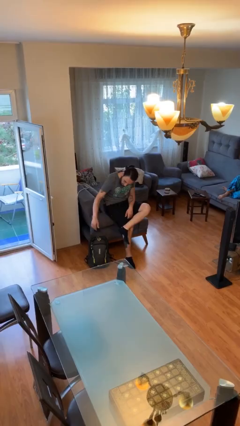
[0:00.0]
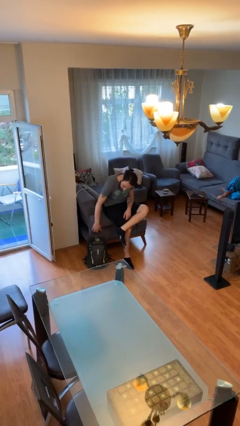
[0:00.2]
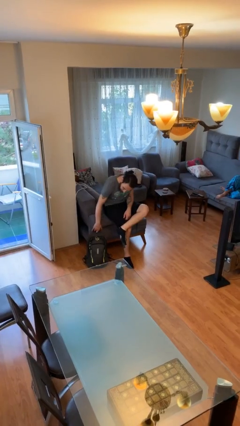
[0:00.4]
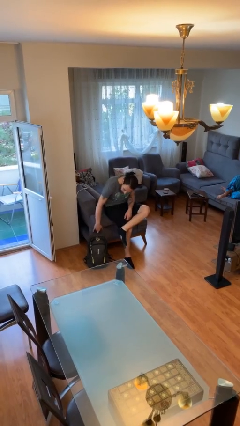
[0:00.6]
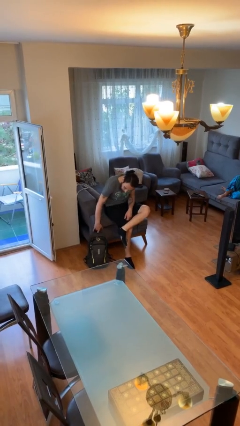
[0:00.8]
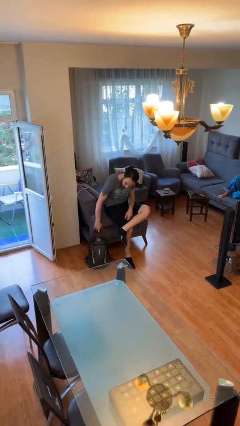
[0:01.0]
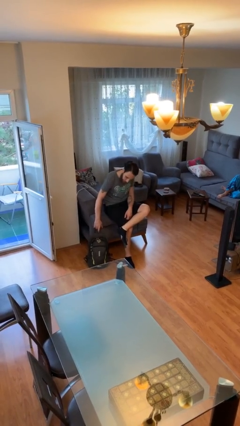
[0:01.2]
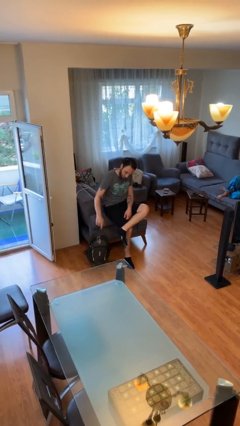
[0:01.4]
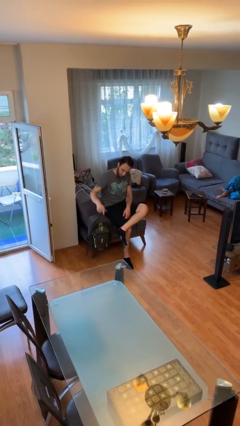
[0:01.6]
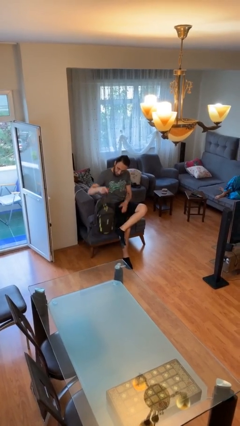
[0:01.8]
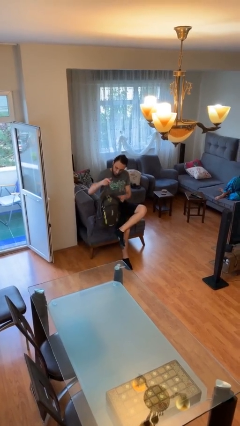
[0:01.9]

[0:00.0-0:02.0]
person picks up object from floor

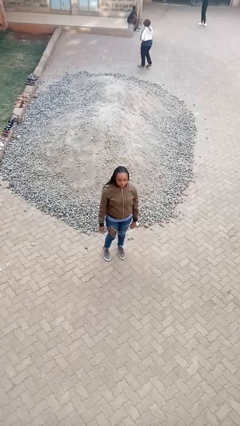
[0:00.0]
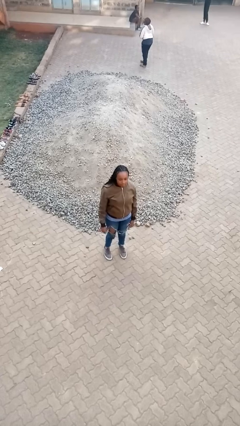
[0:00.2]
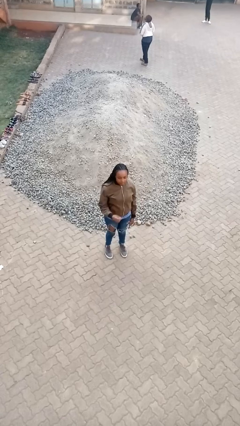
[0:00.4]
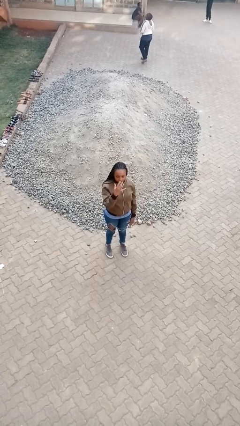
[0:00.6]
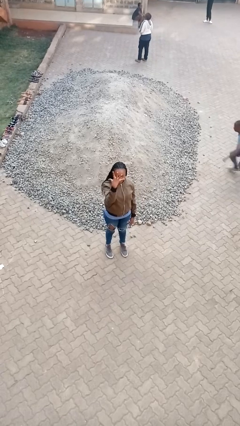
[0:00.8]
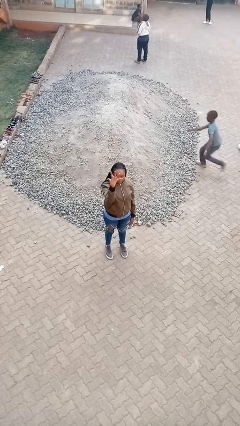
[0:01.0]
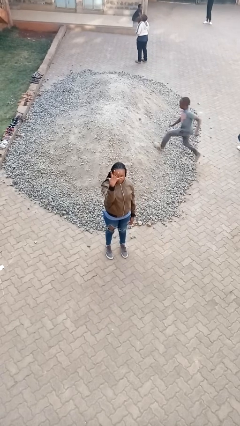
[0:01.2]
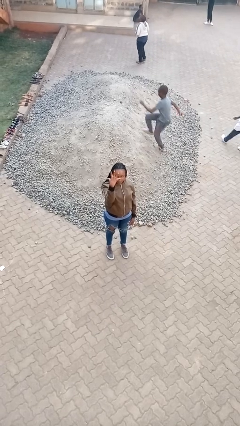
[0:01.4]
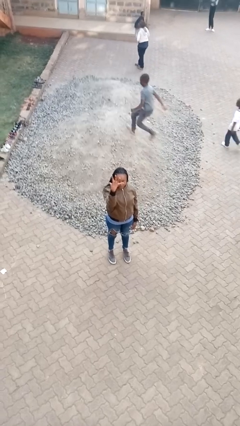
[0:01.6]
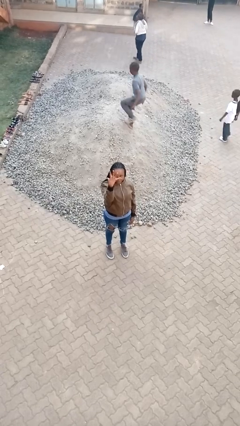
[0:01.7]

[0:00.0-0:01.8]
person gestures number five

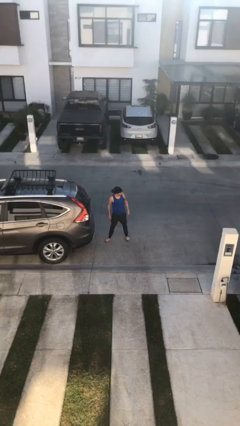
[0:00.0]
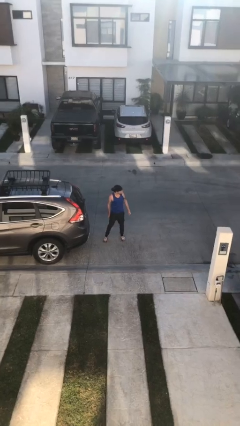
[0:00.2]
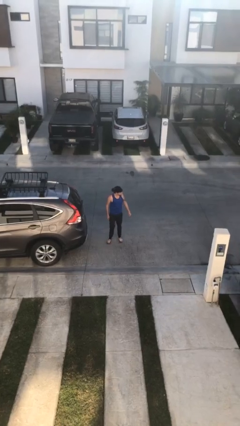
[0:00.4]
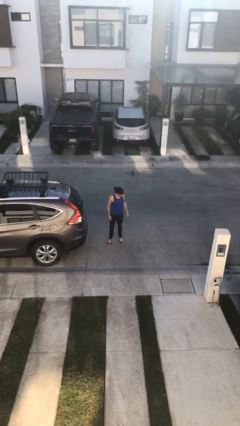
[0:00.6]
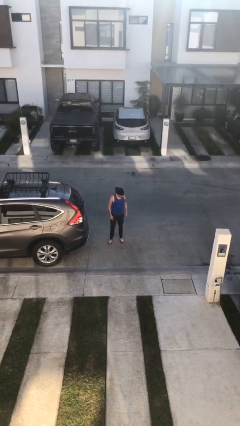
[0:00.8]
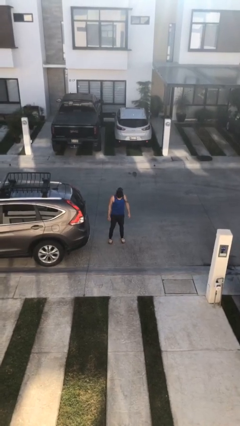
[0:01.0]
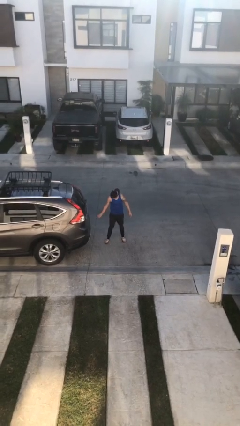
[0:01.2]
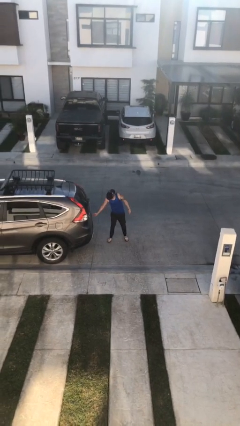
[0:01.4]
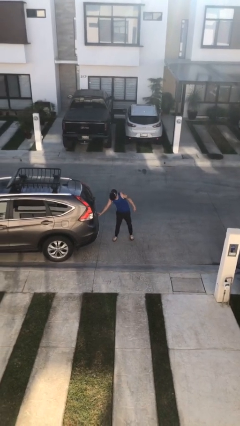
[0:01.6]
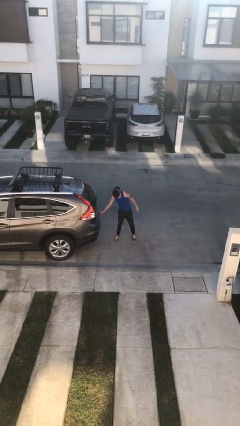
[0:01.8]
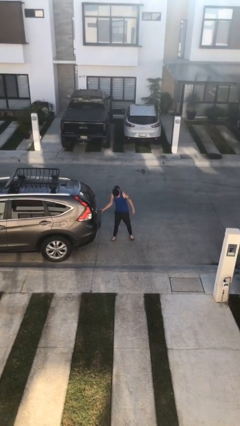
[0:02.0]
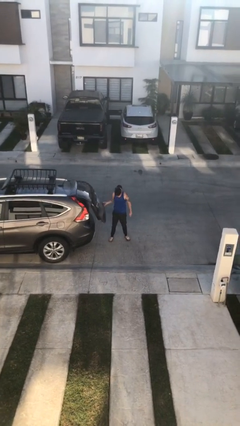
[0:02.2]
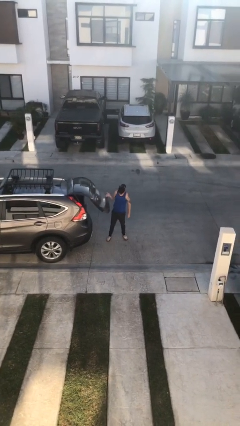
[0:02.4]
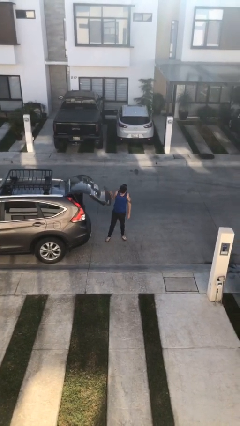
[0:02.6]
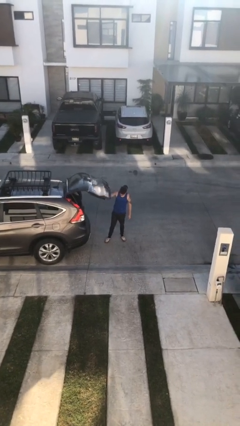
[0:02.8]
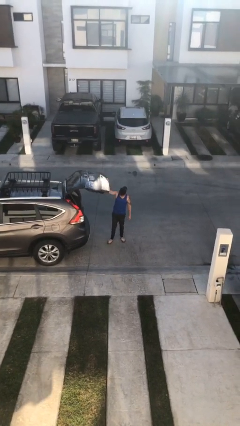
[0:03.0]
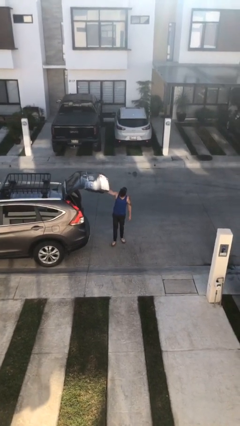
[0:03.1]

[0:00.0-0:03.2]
person opens car trunk

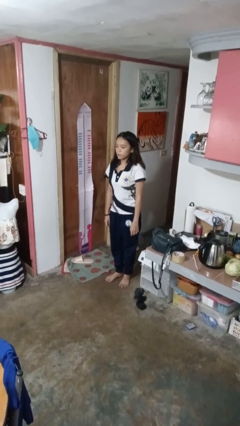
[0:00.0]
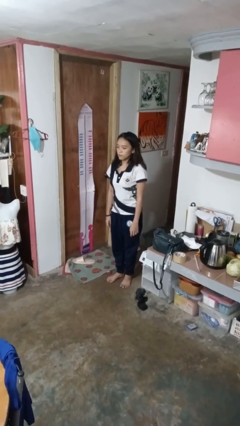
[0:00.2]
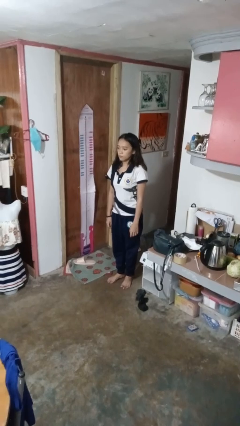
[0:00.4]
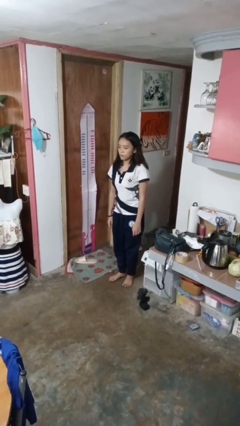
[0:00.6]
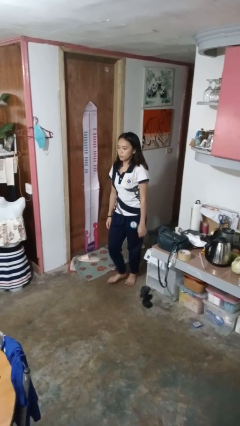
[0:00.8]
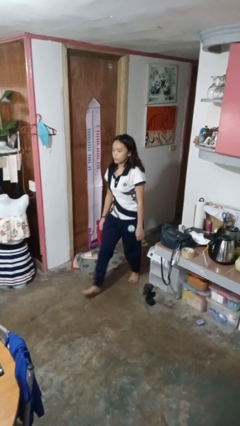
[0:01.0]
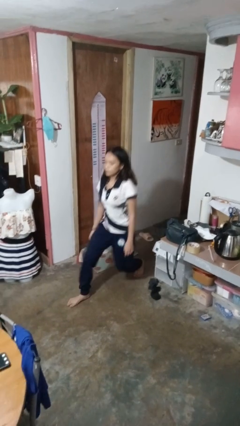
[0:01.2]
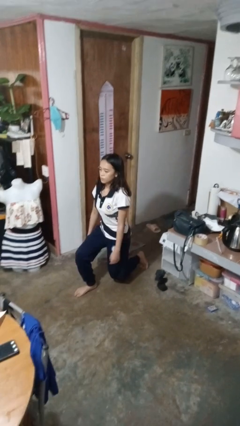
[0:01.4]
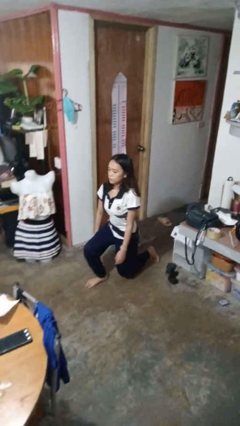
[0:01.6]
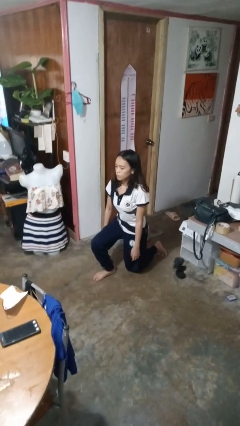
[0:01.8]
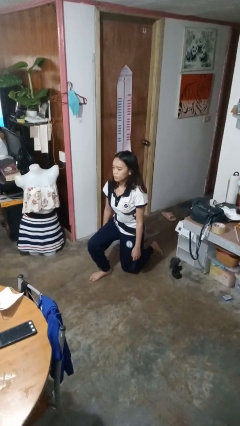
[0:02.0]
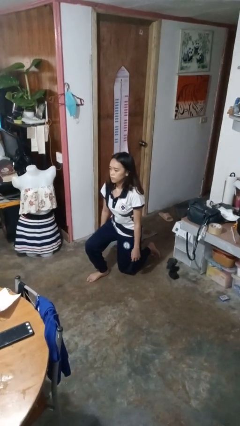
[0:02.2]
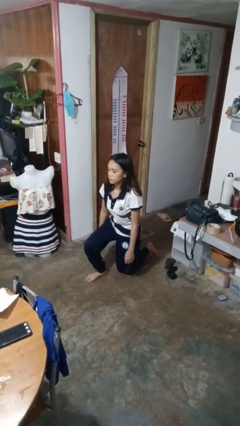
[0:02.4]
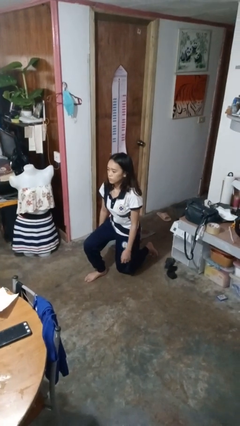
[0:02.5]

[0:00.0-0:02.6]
person kneels

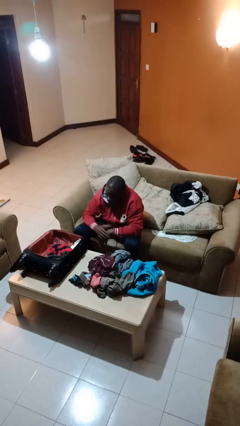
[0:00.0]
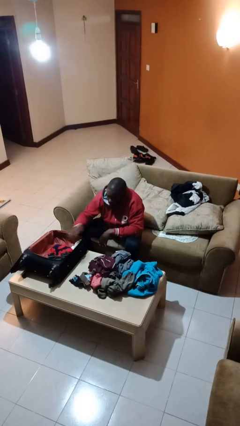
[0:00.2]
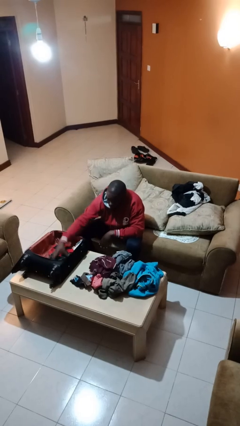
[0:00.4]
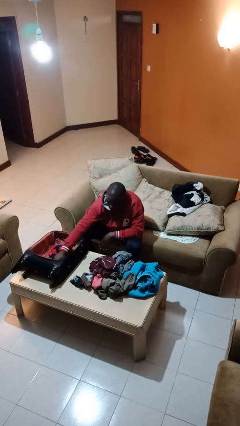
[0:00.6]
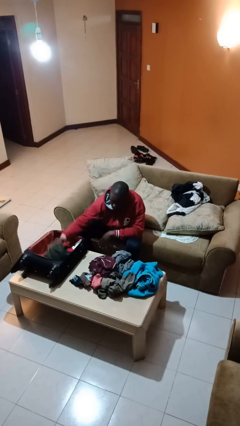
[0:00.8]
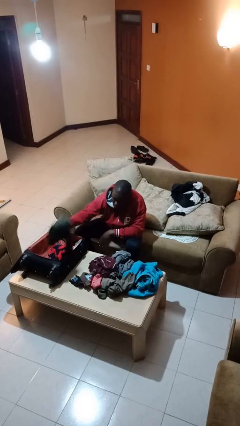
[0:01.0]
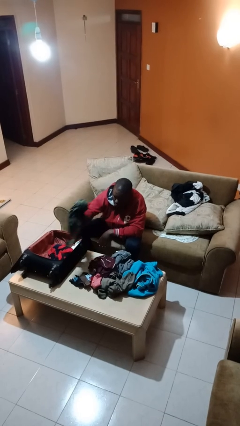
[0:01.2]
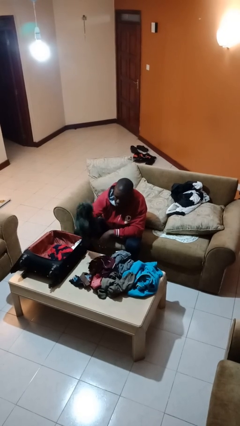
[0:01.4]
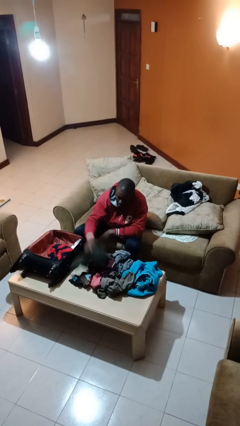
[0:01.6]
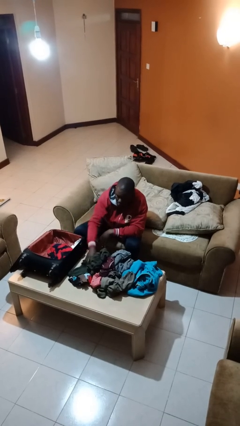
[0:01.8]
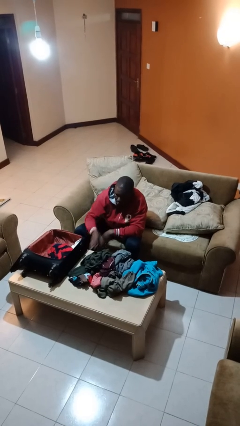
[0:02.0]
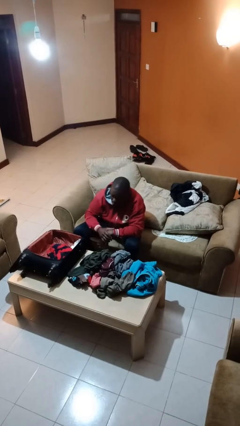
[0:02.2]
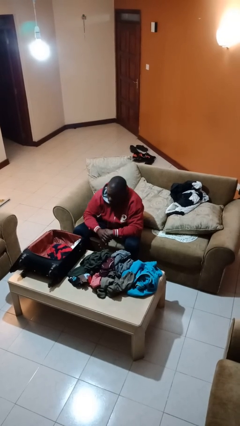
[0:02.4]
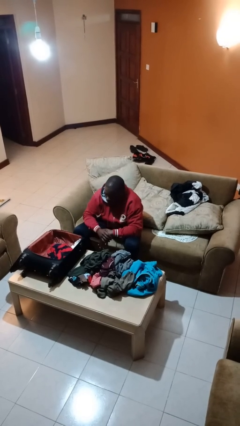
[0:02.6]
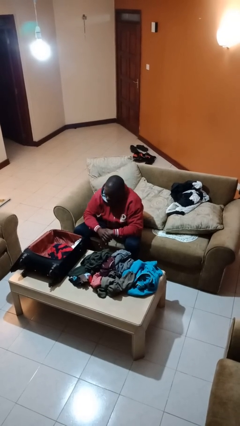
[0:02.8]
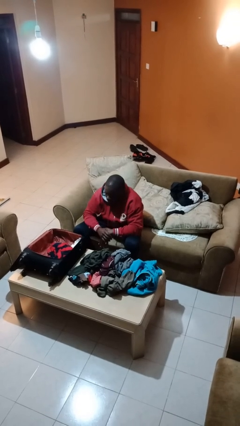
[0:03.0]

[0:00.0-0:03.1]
person unloads clothes from suitcase

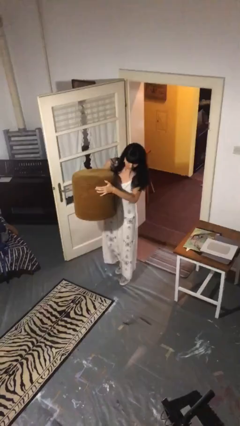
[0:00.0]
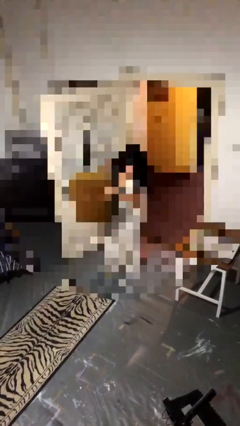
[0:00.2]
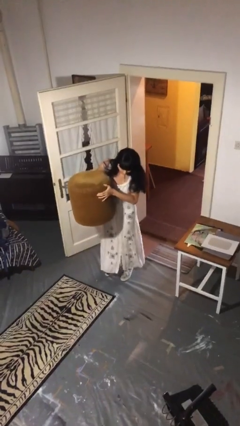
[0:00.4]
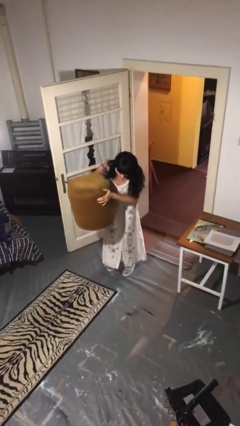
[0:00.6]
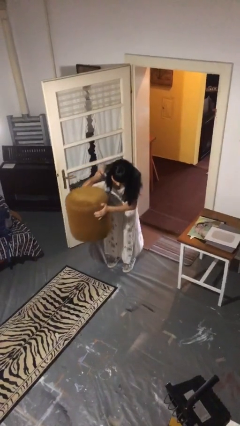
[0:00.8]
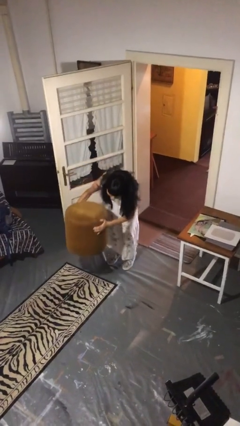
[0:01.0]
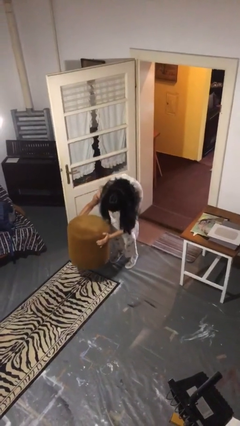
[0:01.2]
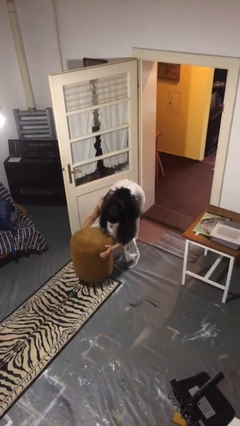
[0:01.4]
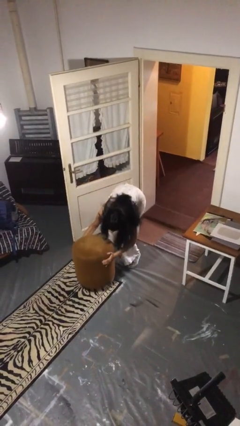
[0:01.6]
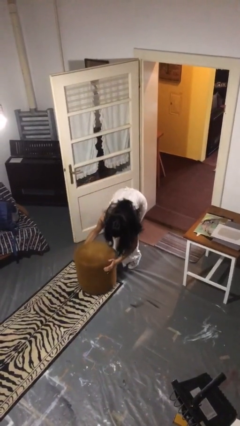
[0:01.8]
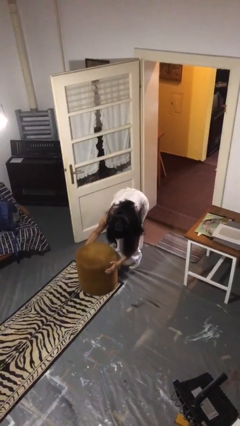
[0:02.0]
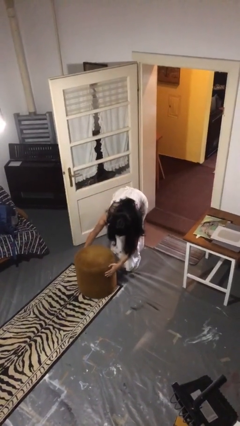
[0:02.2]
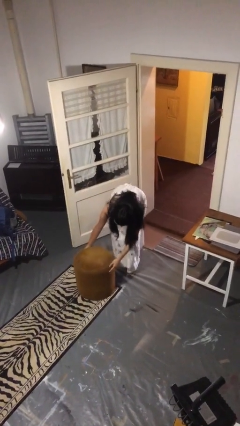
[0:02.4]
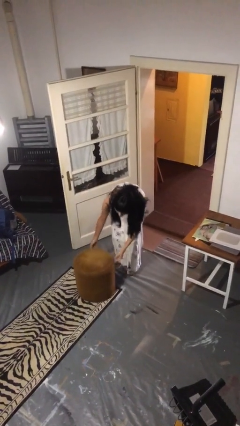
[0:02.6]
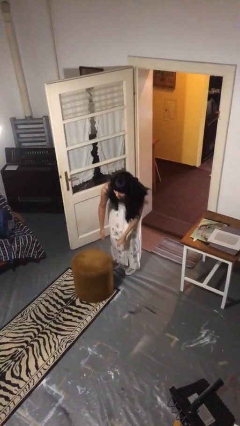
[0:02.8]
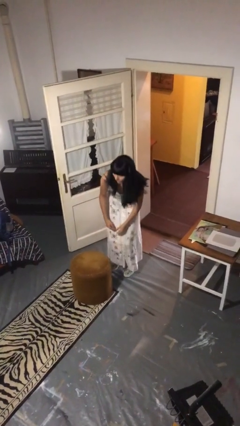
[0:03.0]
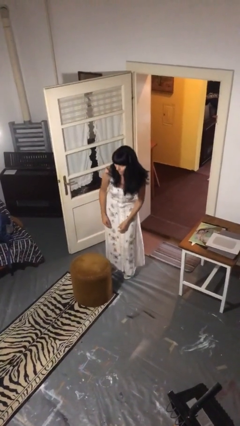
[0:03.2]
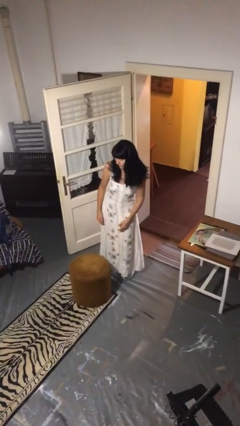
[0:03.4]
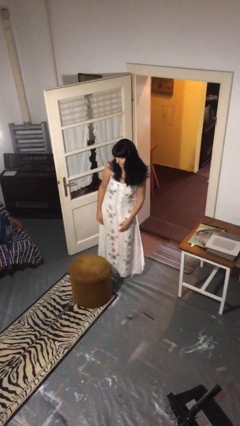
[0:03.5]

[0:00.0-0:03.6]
person puts down object on floor

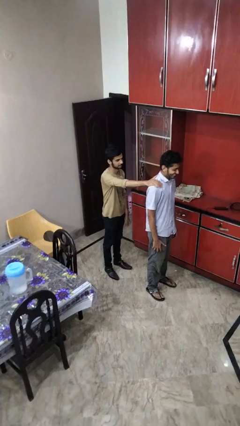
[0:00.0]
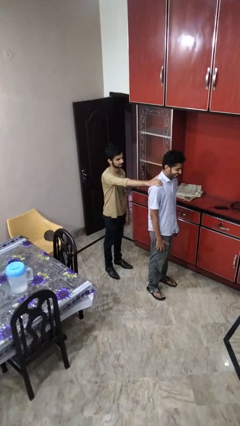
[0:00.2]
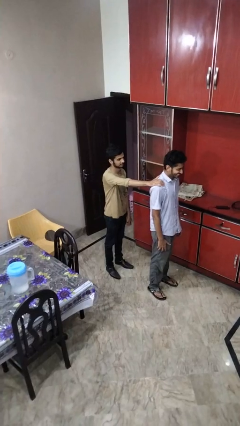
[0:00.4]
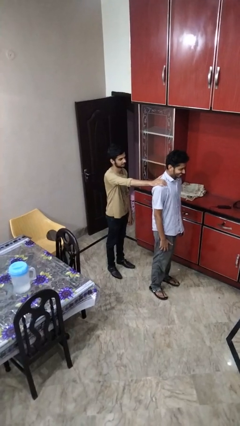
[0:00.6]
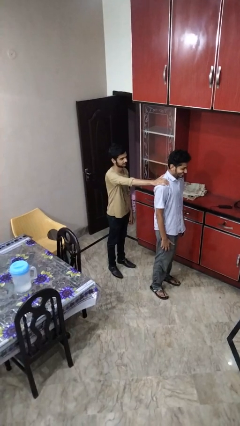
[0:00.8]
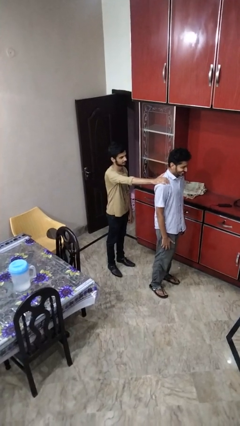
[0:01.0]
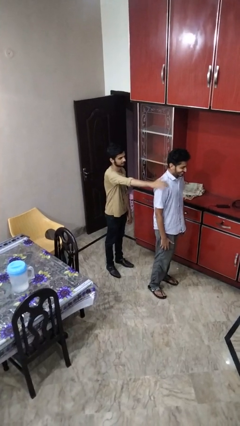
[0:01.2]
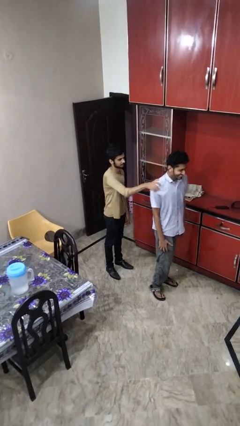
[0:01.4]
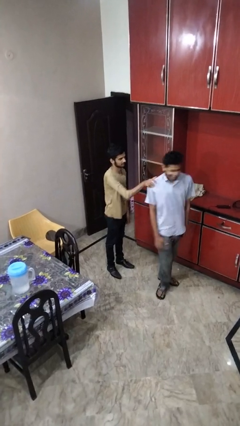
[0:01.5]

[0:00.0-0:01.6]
person grabs person by shoulder
